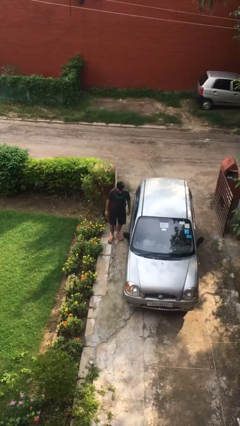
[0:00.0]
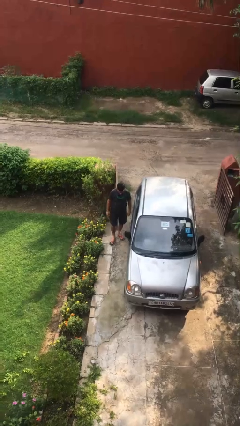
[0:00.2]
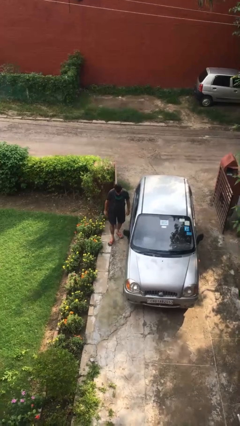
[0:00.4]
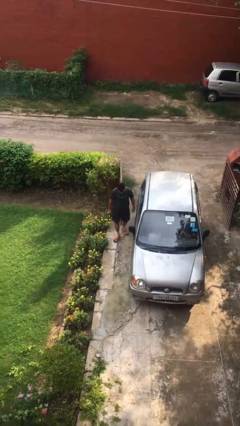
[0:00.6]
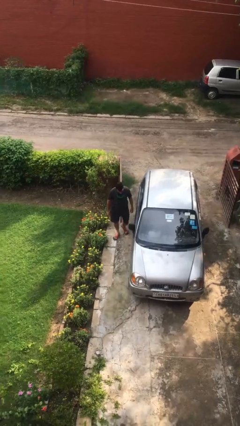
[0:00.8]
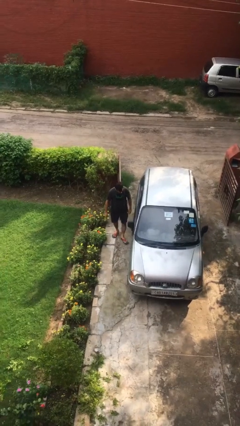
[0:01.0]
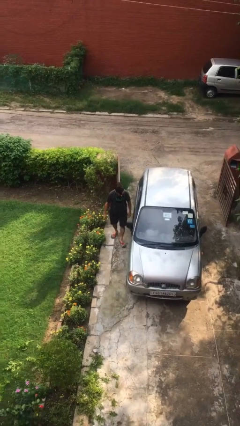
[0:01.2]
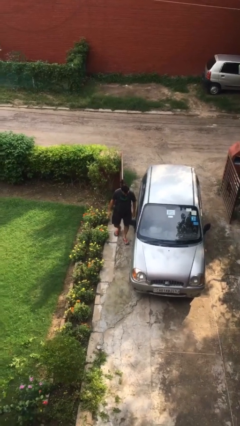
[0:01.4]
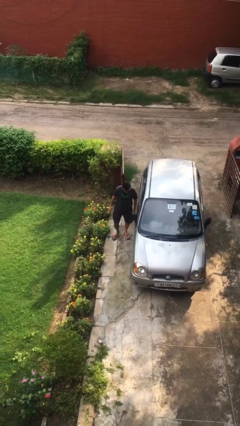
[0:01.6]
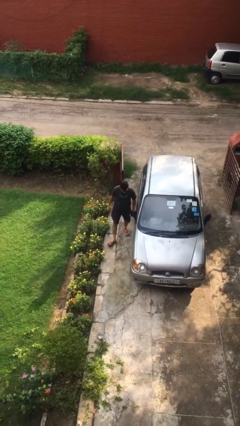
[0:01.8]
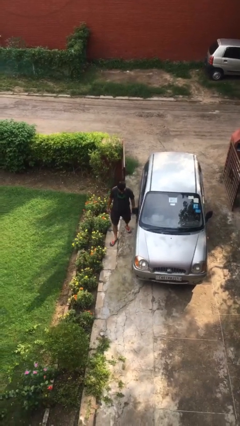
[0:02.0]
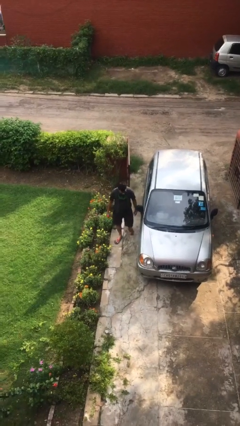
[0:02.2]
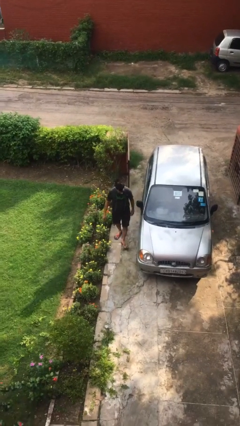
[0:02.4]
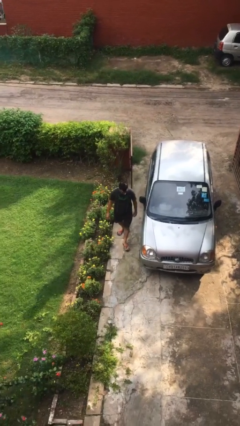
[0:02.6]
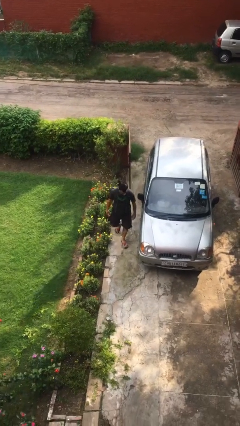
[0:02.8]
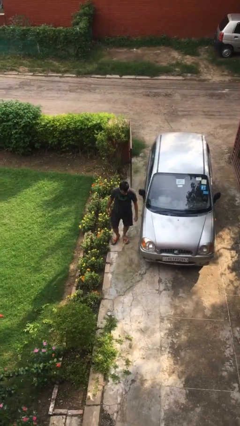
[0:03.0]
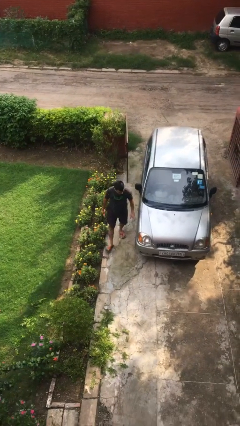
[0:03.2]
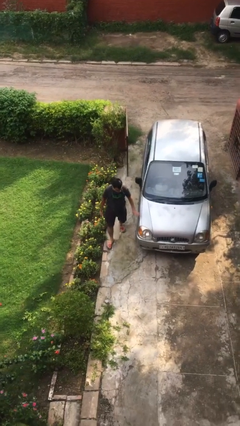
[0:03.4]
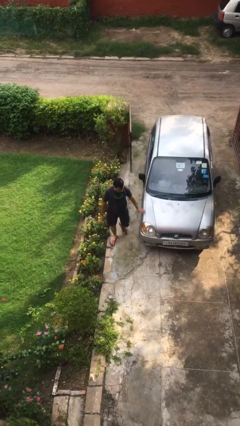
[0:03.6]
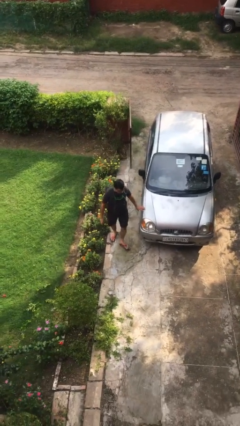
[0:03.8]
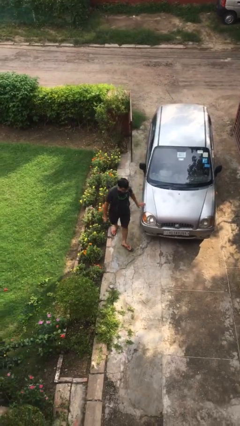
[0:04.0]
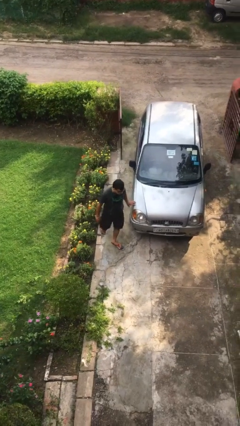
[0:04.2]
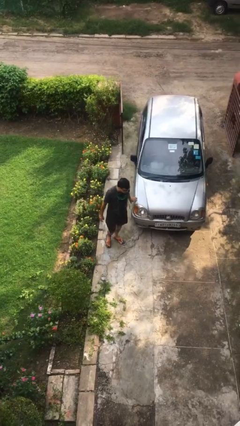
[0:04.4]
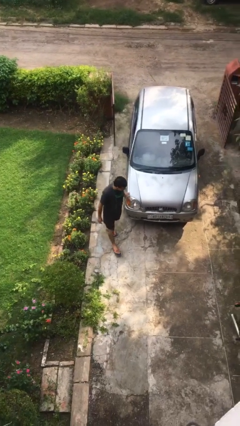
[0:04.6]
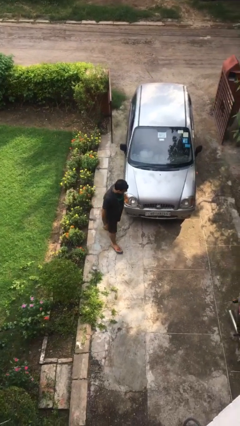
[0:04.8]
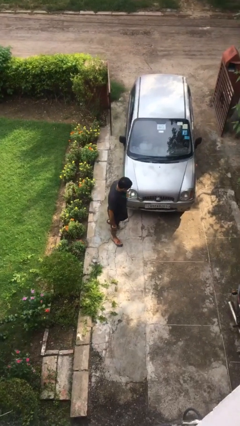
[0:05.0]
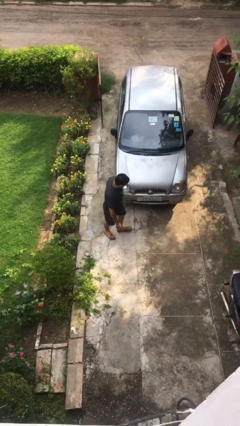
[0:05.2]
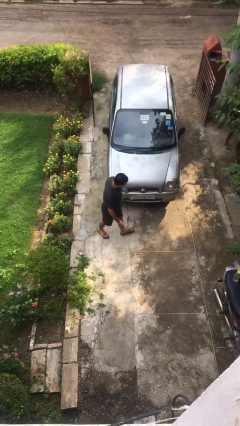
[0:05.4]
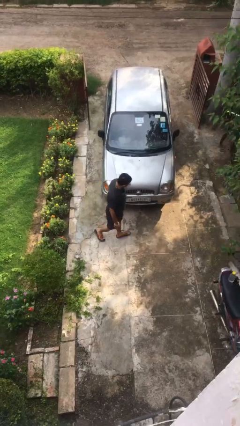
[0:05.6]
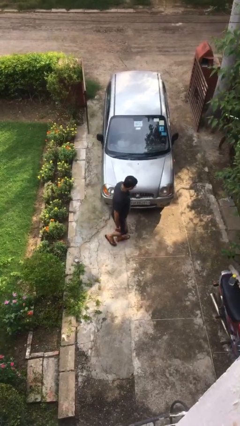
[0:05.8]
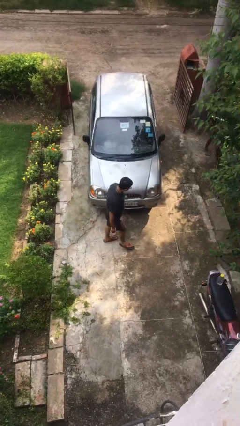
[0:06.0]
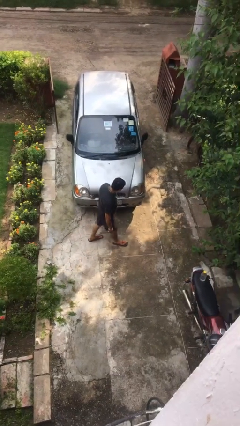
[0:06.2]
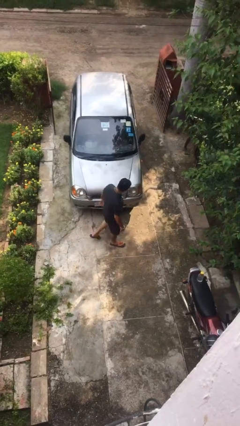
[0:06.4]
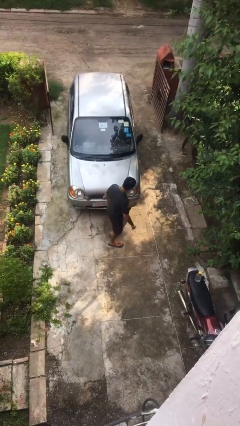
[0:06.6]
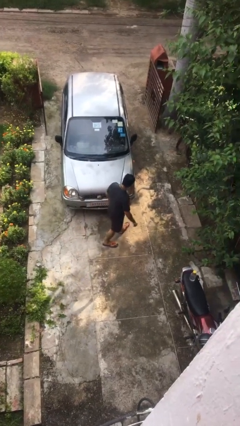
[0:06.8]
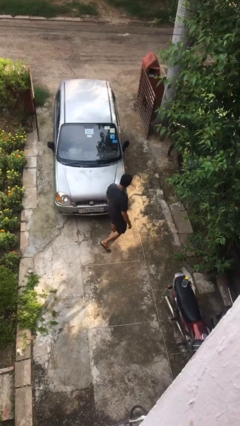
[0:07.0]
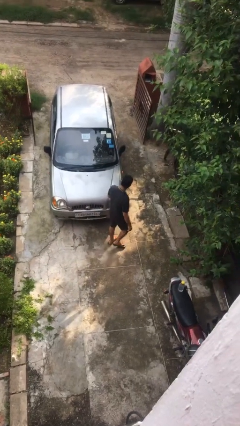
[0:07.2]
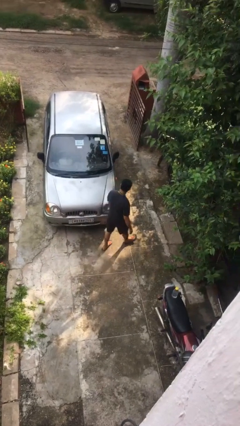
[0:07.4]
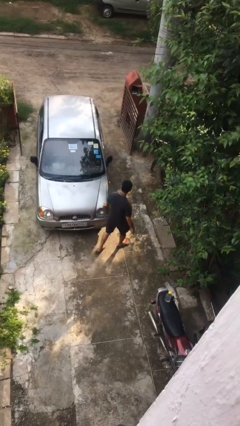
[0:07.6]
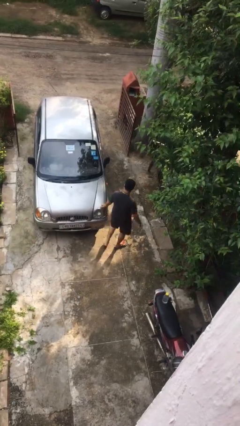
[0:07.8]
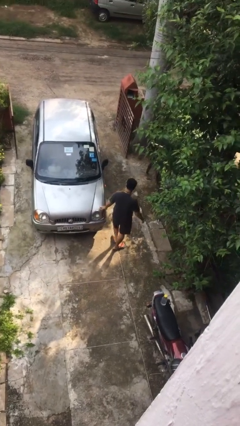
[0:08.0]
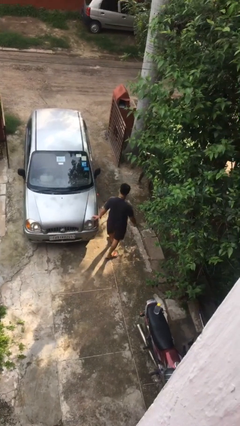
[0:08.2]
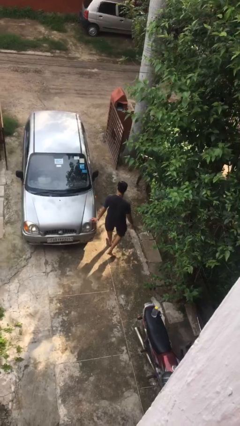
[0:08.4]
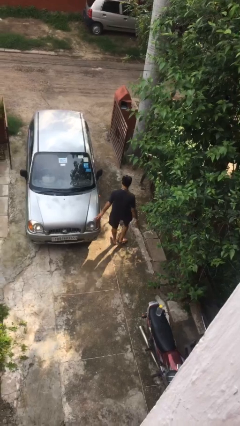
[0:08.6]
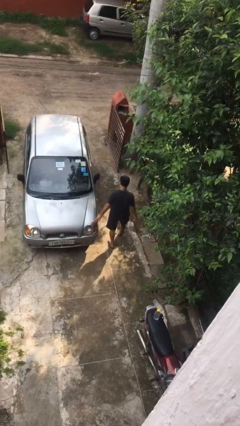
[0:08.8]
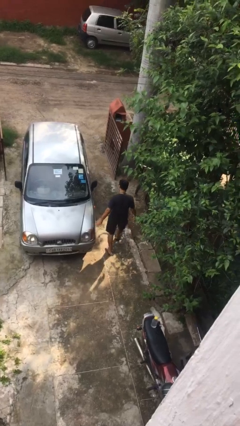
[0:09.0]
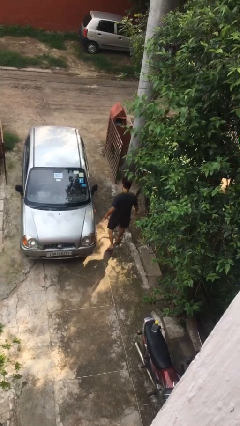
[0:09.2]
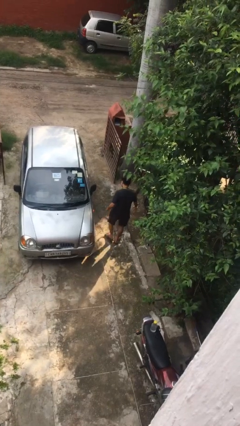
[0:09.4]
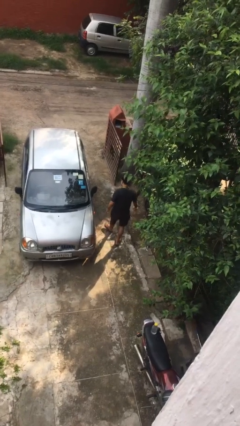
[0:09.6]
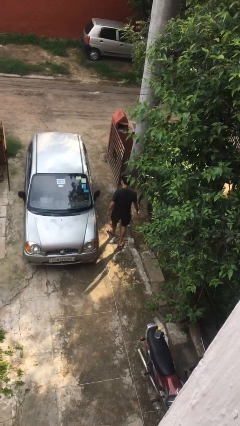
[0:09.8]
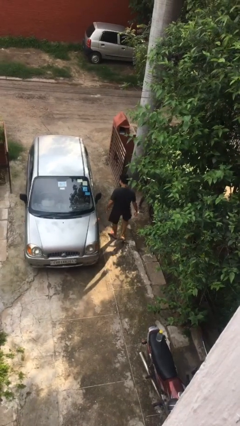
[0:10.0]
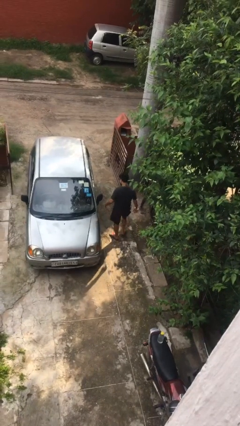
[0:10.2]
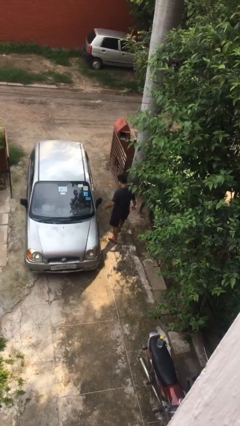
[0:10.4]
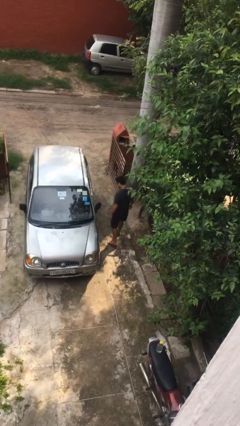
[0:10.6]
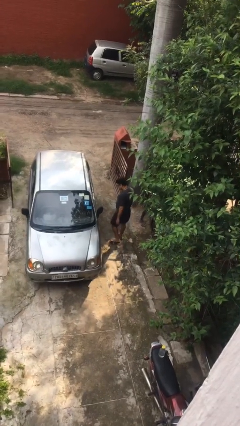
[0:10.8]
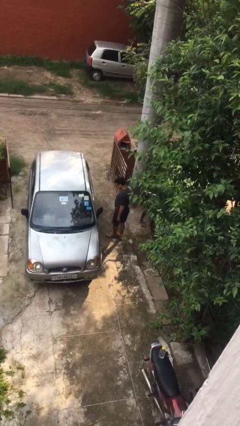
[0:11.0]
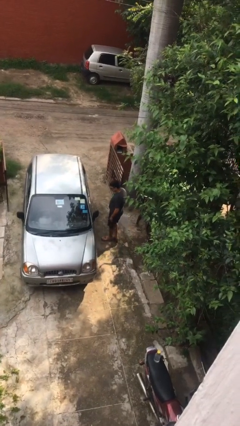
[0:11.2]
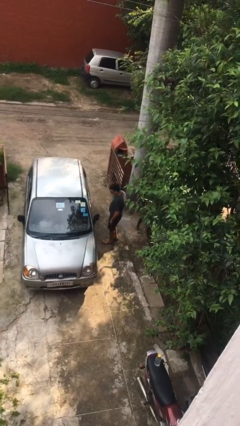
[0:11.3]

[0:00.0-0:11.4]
person walks around car

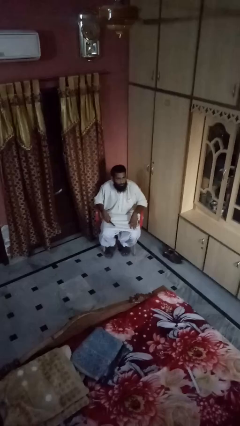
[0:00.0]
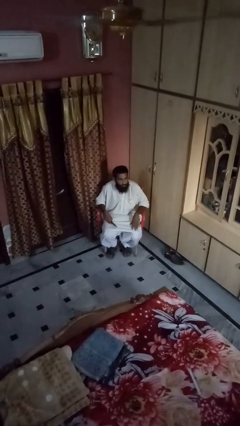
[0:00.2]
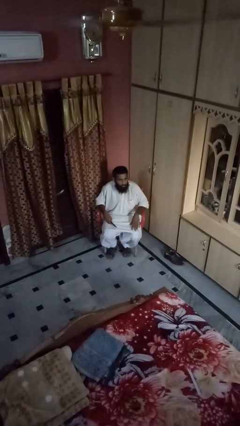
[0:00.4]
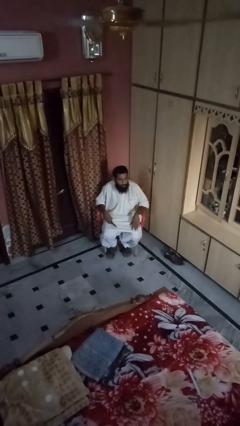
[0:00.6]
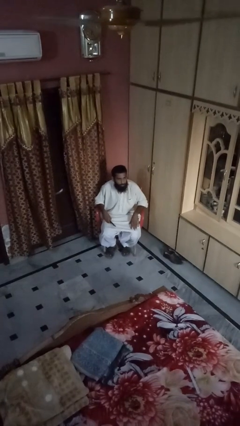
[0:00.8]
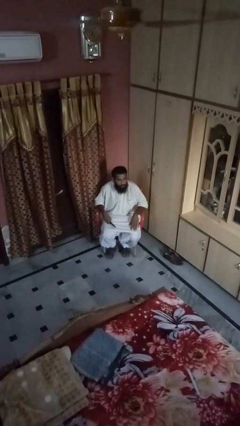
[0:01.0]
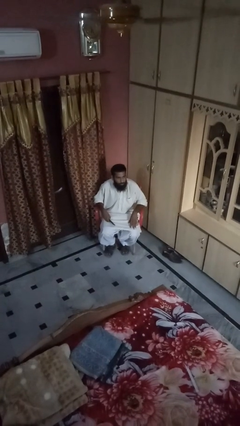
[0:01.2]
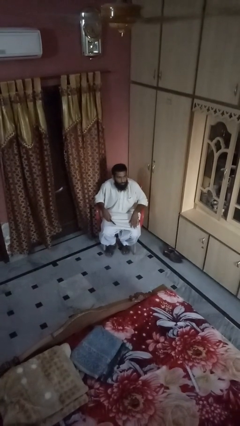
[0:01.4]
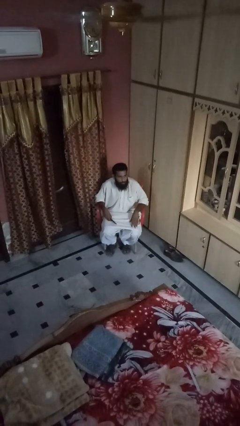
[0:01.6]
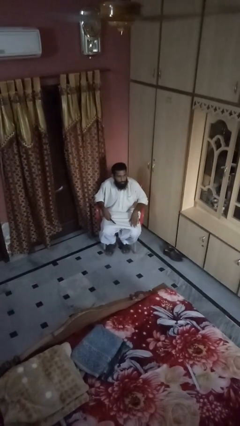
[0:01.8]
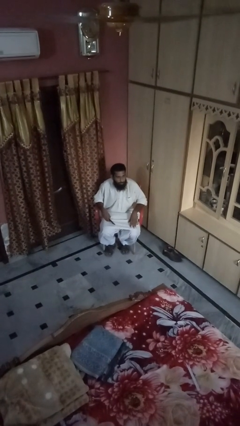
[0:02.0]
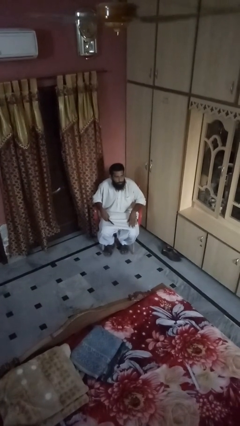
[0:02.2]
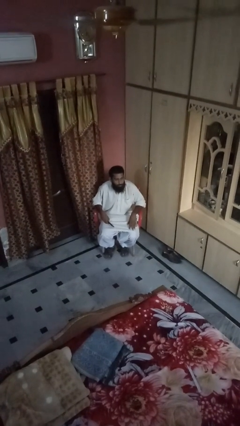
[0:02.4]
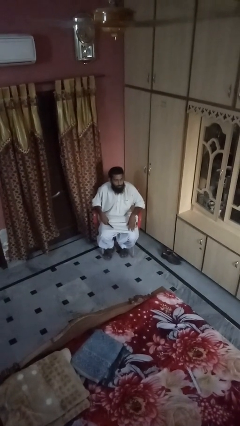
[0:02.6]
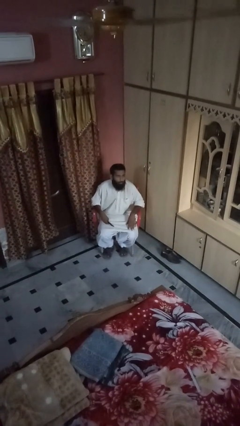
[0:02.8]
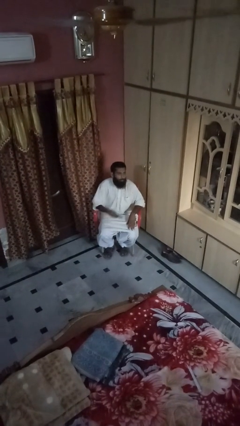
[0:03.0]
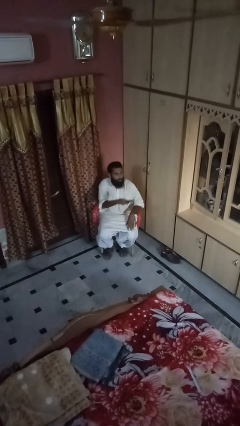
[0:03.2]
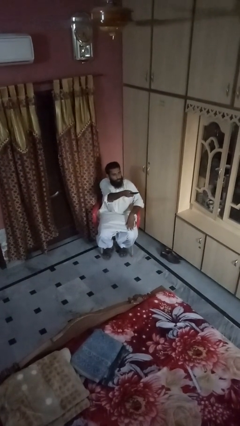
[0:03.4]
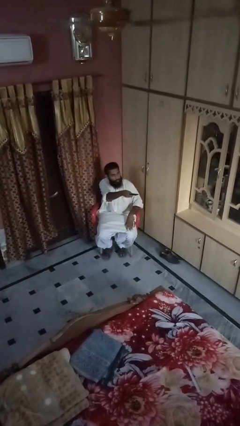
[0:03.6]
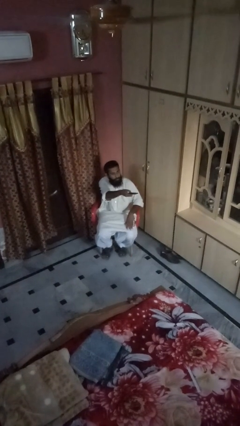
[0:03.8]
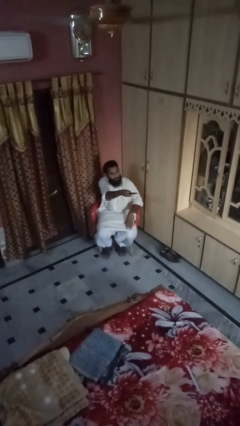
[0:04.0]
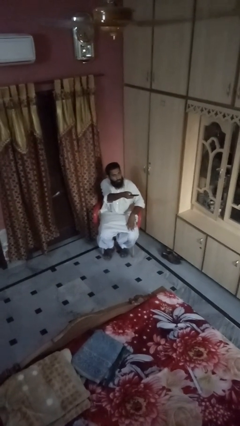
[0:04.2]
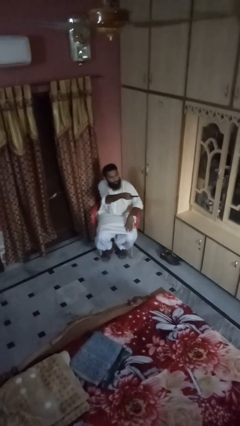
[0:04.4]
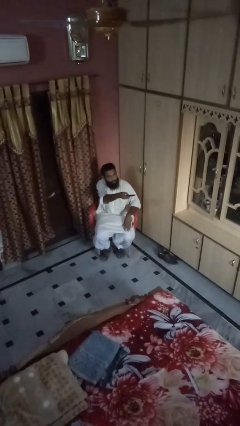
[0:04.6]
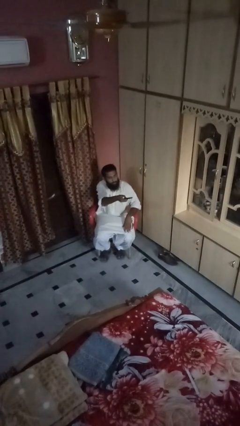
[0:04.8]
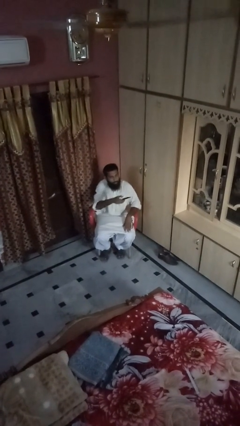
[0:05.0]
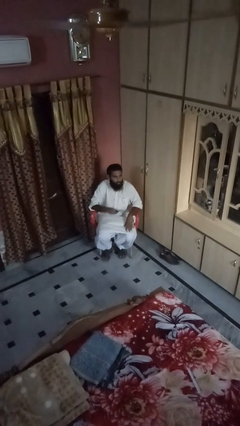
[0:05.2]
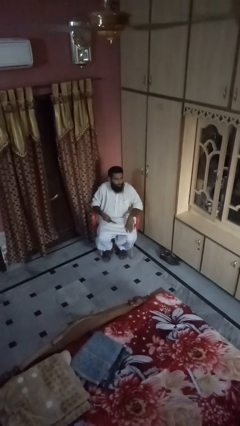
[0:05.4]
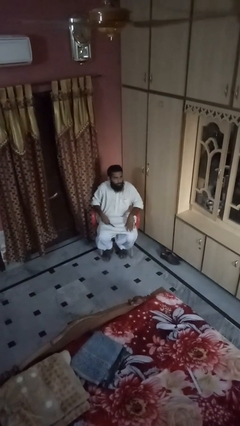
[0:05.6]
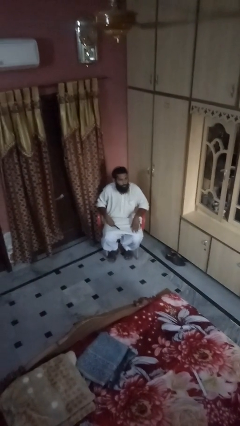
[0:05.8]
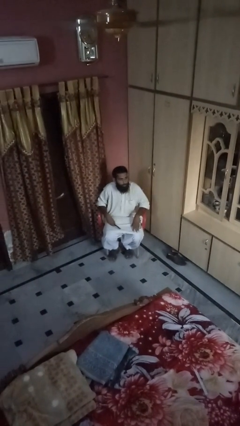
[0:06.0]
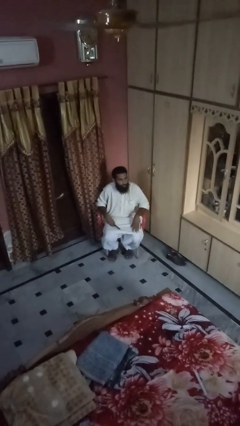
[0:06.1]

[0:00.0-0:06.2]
person uses television remote

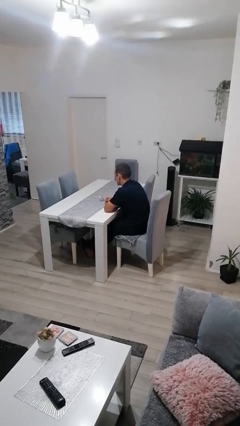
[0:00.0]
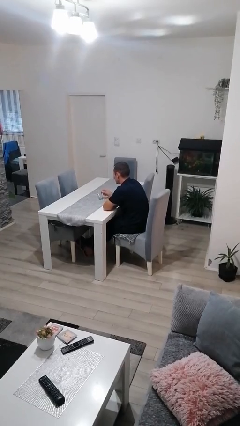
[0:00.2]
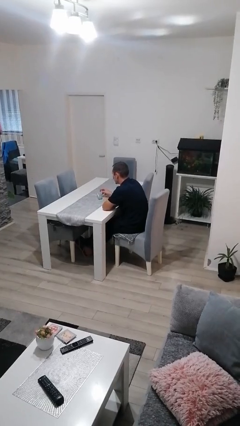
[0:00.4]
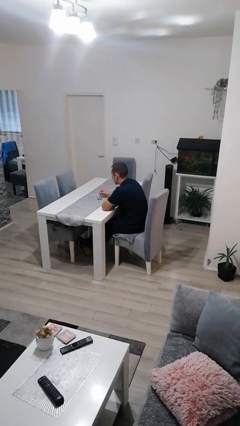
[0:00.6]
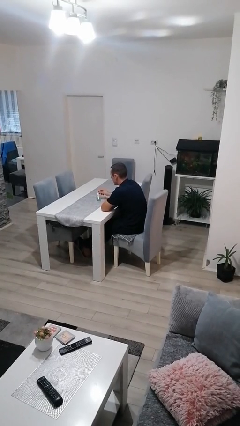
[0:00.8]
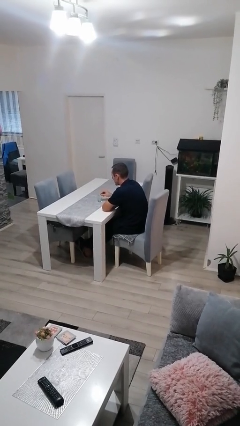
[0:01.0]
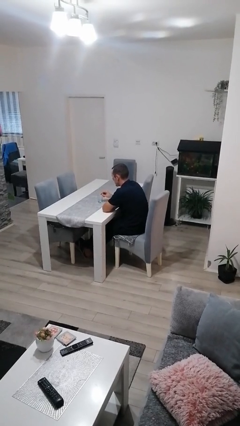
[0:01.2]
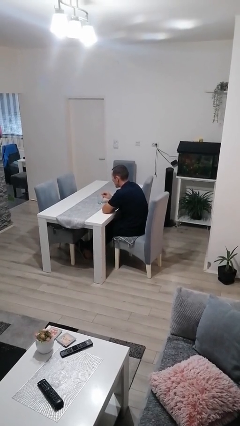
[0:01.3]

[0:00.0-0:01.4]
person sets upright glass
